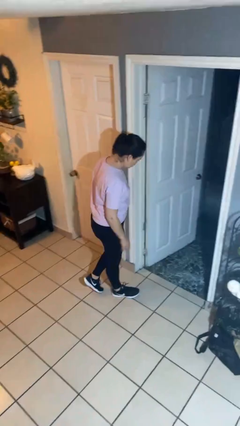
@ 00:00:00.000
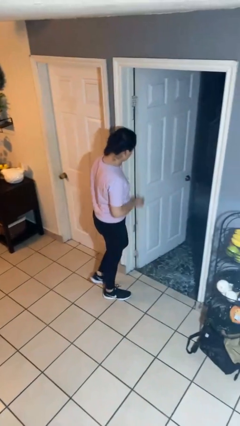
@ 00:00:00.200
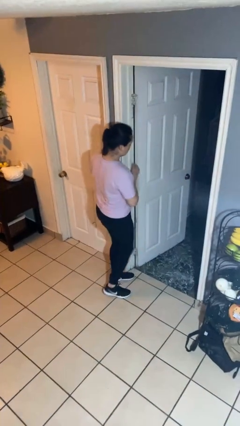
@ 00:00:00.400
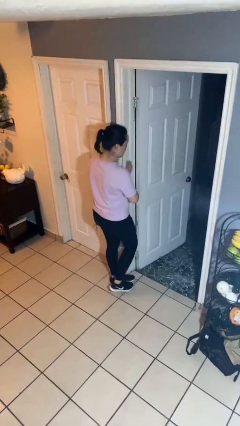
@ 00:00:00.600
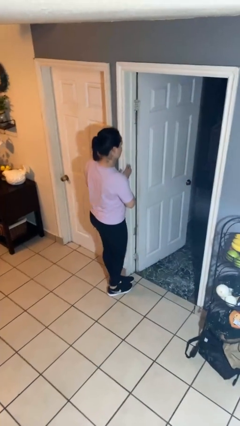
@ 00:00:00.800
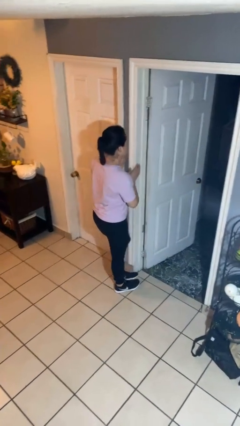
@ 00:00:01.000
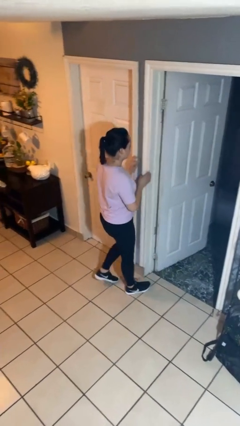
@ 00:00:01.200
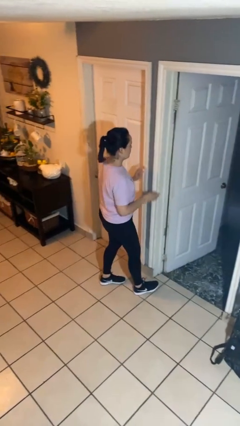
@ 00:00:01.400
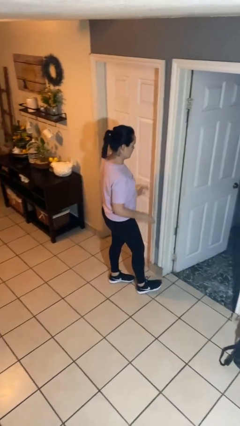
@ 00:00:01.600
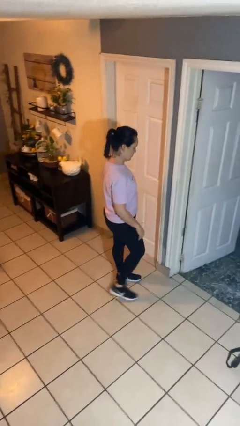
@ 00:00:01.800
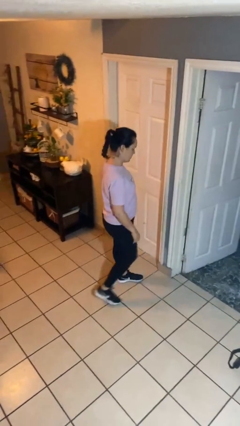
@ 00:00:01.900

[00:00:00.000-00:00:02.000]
person bumps into wall

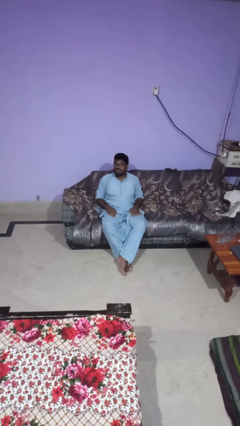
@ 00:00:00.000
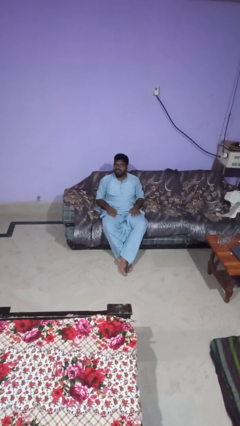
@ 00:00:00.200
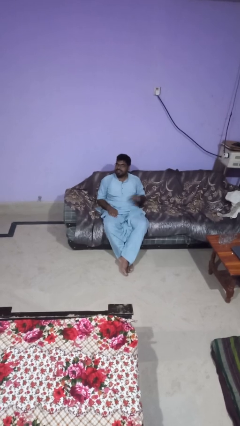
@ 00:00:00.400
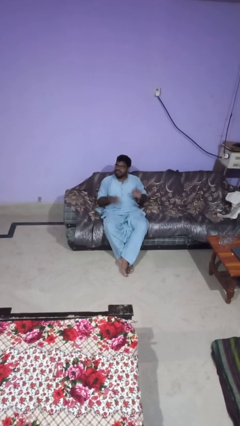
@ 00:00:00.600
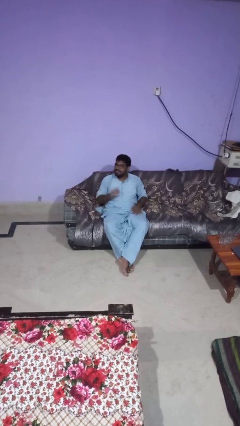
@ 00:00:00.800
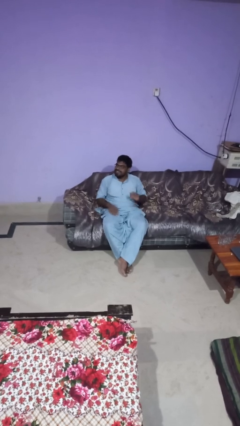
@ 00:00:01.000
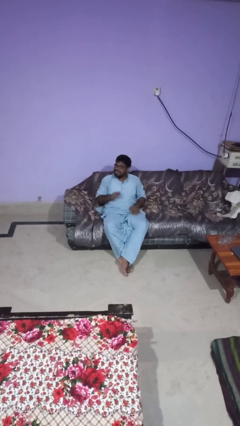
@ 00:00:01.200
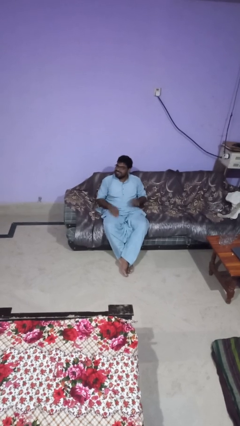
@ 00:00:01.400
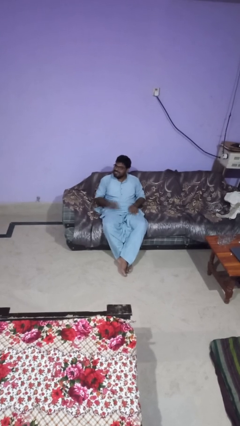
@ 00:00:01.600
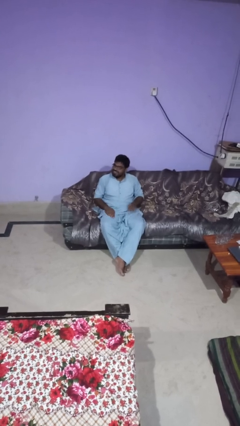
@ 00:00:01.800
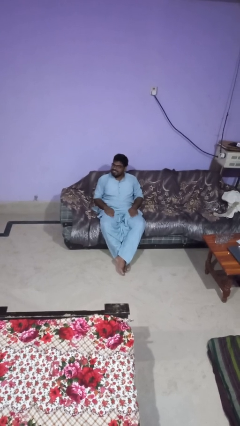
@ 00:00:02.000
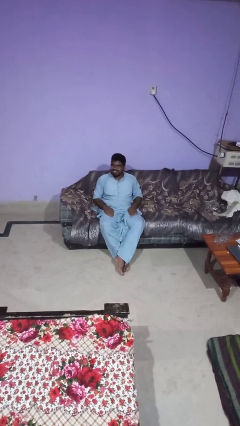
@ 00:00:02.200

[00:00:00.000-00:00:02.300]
person slaps hands on thighs

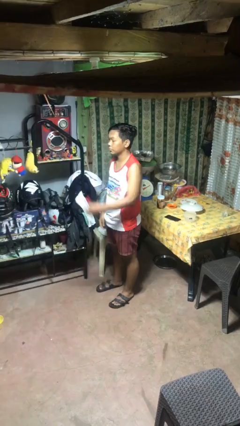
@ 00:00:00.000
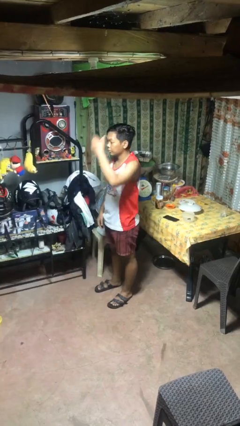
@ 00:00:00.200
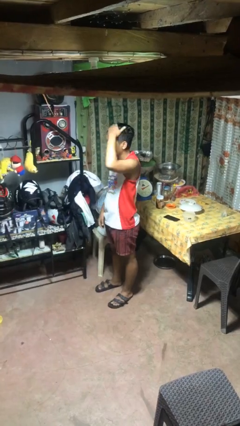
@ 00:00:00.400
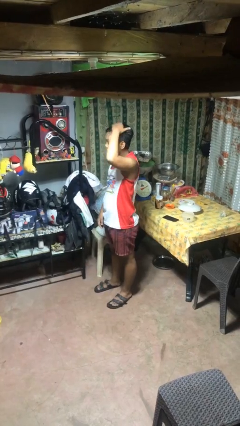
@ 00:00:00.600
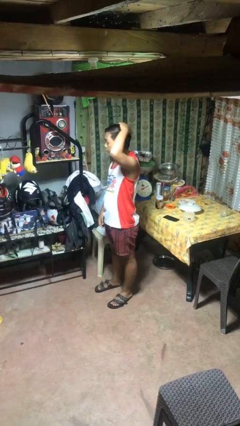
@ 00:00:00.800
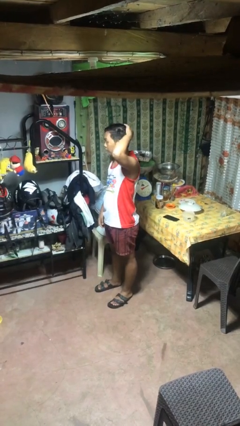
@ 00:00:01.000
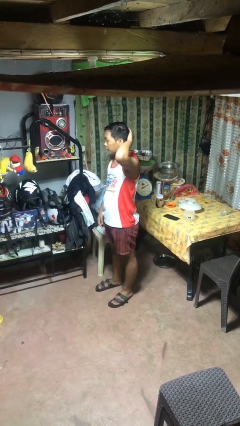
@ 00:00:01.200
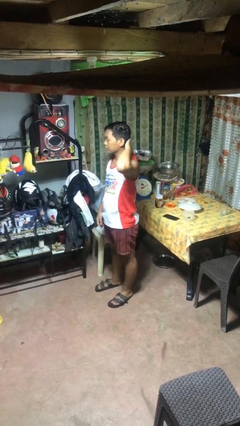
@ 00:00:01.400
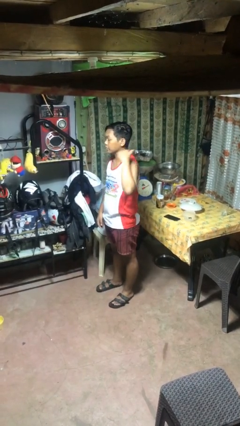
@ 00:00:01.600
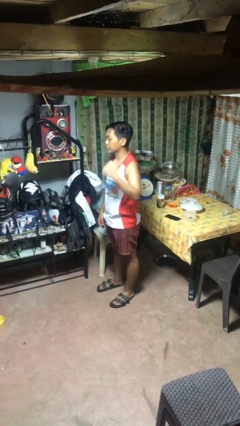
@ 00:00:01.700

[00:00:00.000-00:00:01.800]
person pats head

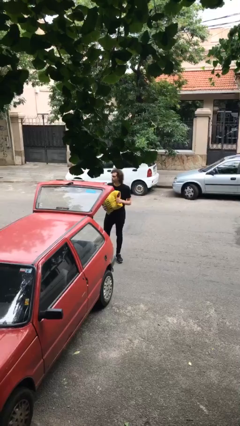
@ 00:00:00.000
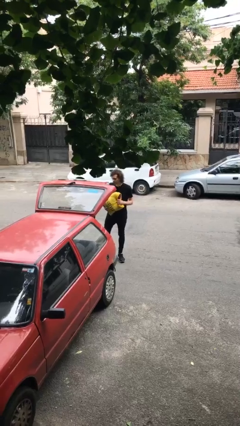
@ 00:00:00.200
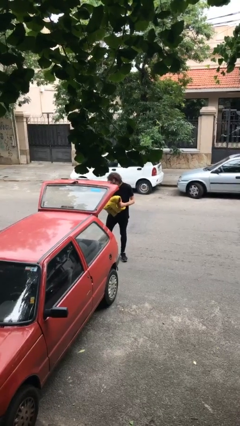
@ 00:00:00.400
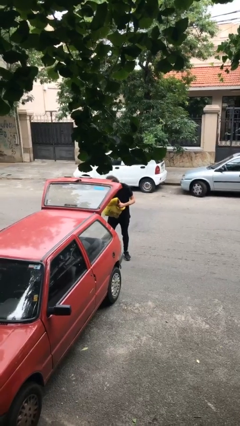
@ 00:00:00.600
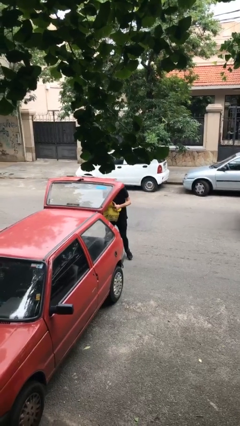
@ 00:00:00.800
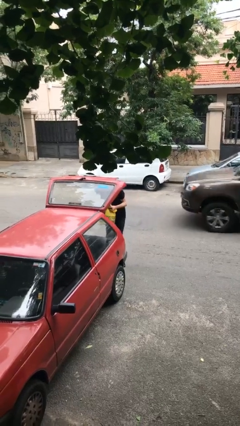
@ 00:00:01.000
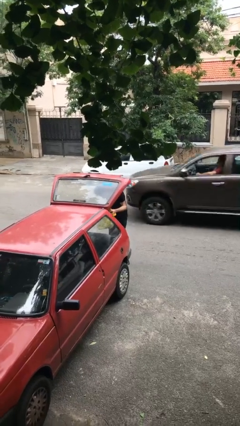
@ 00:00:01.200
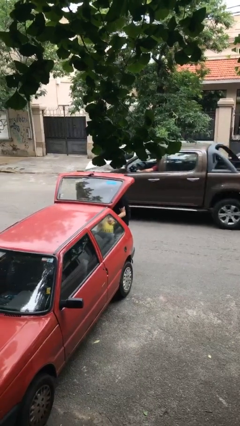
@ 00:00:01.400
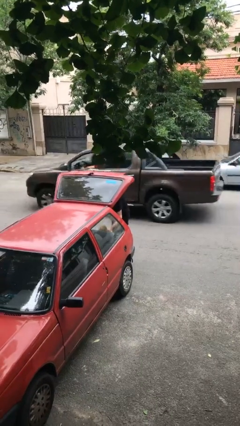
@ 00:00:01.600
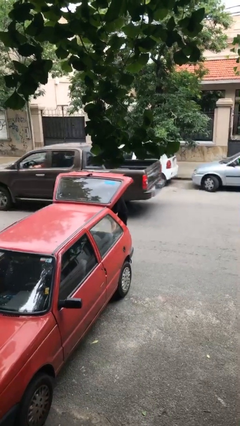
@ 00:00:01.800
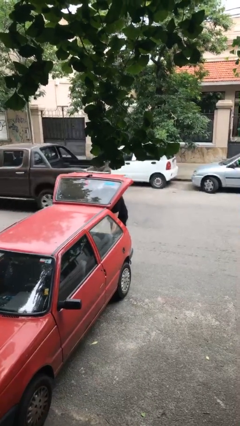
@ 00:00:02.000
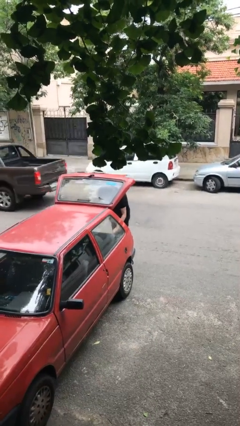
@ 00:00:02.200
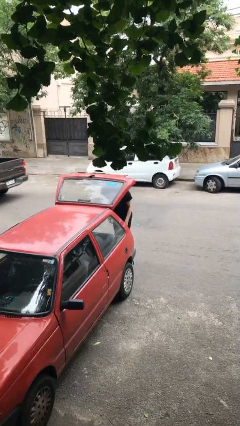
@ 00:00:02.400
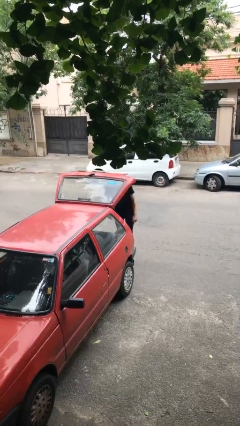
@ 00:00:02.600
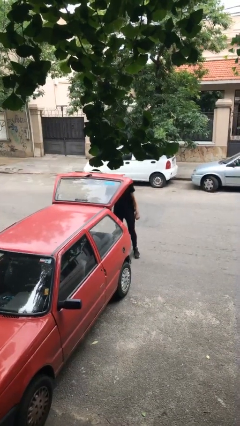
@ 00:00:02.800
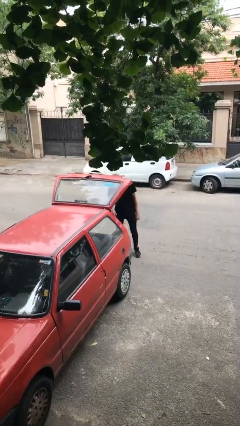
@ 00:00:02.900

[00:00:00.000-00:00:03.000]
person loads car

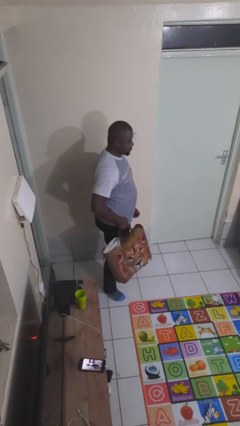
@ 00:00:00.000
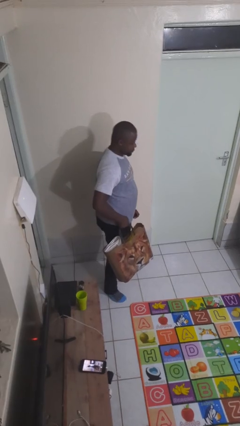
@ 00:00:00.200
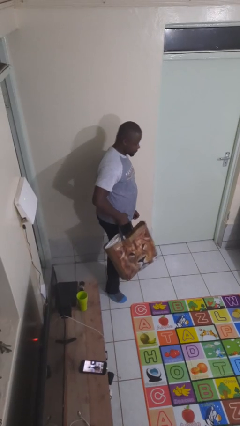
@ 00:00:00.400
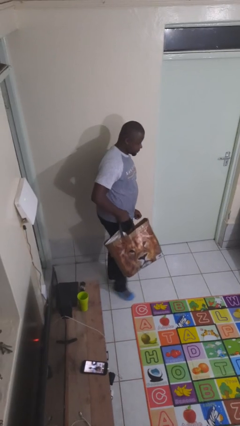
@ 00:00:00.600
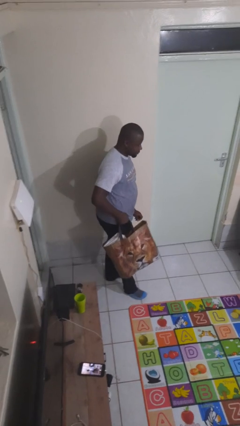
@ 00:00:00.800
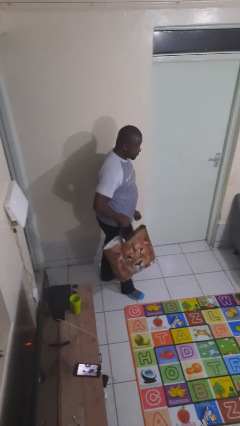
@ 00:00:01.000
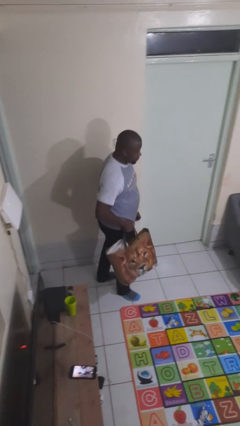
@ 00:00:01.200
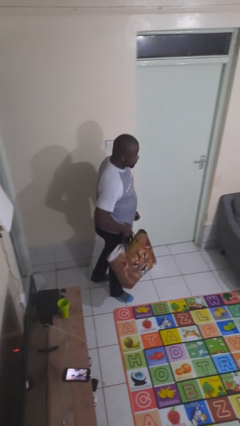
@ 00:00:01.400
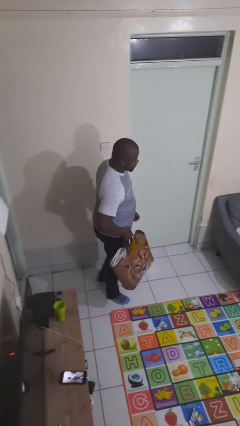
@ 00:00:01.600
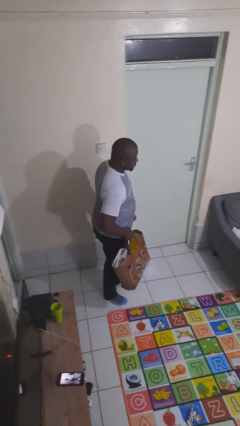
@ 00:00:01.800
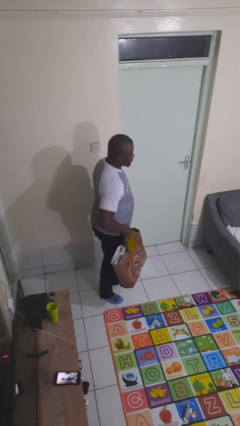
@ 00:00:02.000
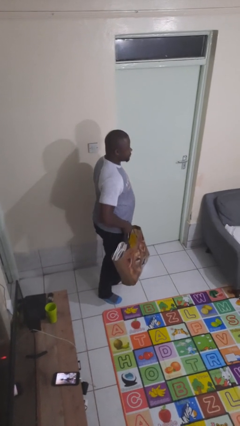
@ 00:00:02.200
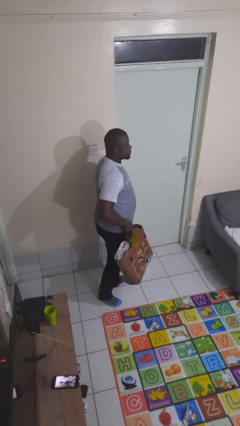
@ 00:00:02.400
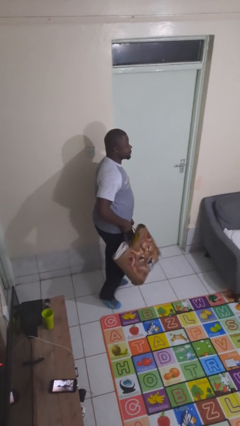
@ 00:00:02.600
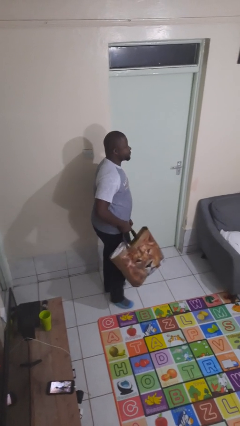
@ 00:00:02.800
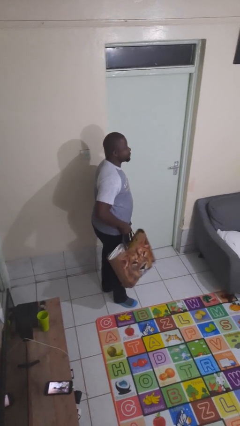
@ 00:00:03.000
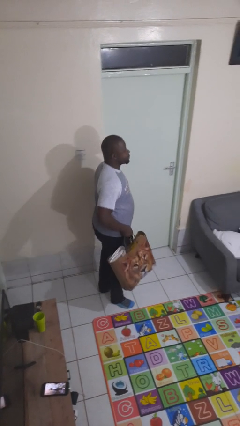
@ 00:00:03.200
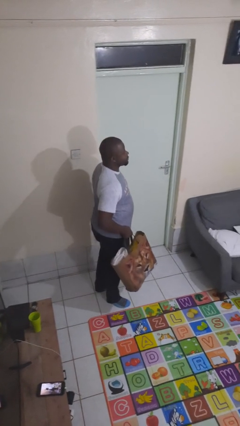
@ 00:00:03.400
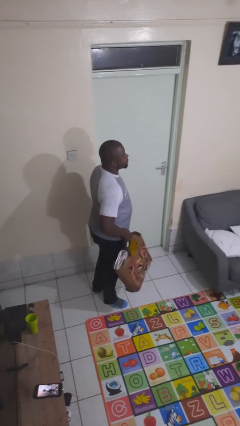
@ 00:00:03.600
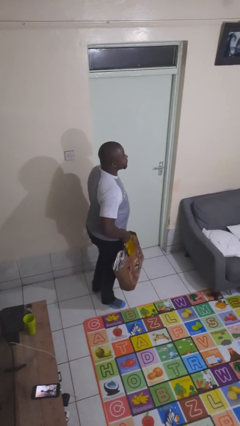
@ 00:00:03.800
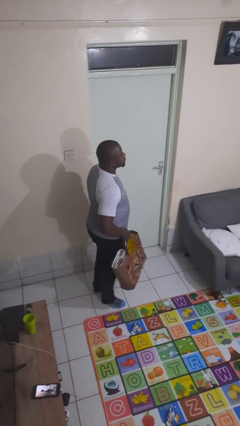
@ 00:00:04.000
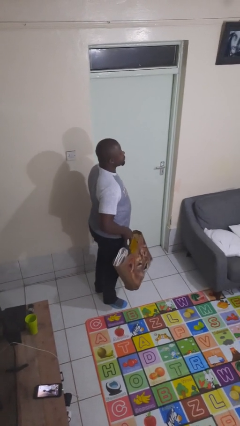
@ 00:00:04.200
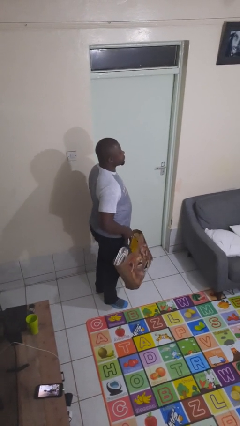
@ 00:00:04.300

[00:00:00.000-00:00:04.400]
person carries groceries

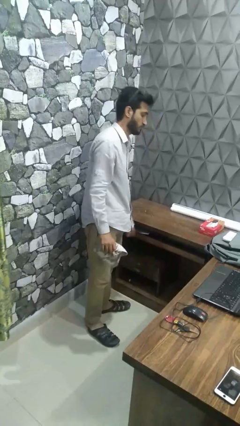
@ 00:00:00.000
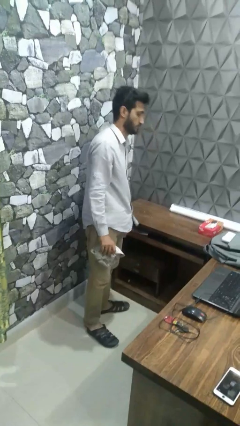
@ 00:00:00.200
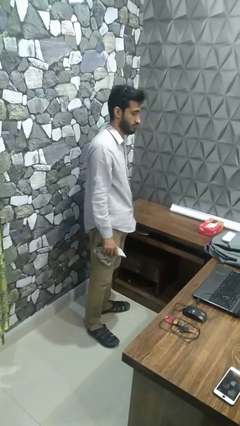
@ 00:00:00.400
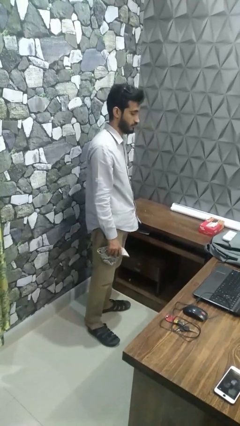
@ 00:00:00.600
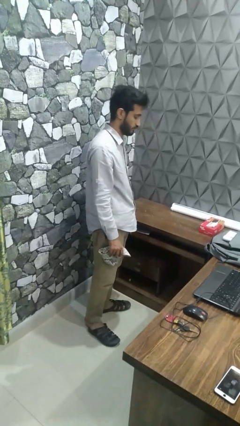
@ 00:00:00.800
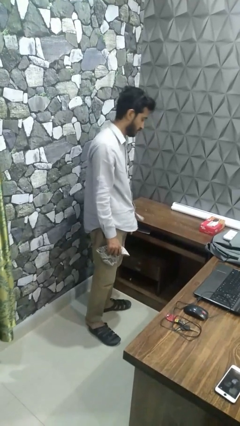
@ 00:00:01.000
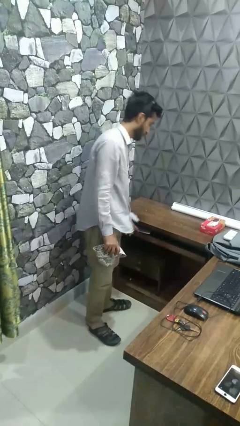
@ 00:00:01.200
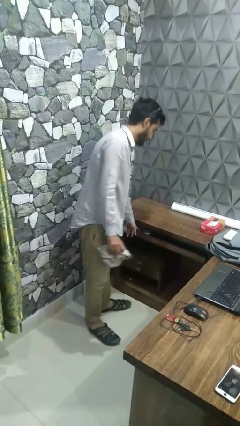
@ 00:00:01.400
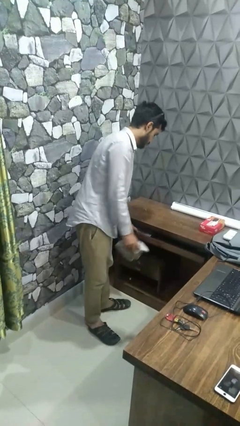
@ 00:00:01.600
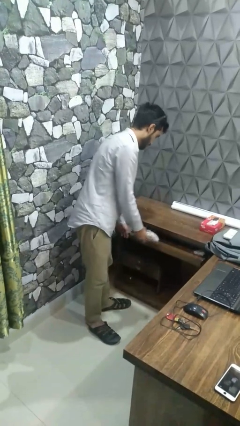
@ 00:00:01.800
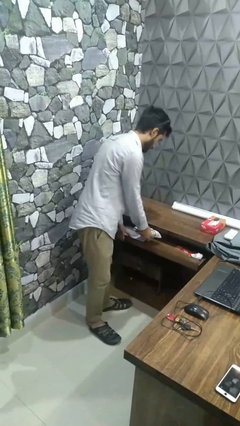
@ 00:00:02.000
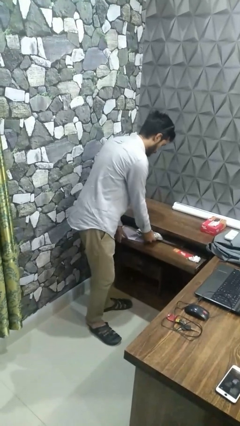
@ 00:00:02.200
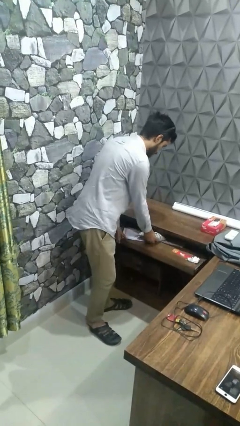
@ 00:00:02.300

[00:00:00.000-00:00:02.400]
person puts clothes into dresser

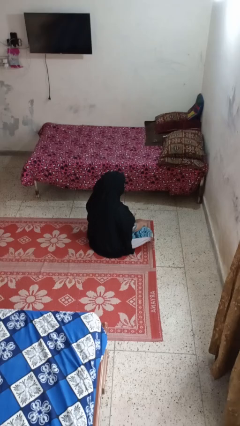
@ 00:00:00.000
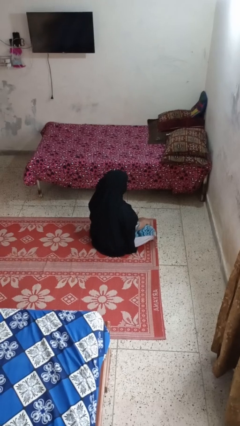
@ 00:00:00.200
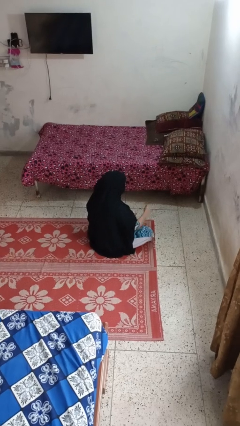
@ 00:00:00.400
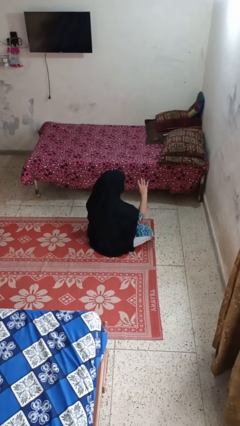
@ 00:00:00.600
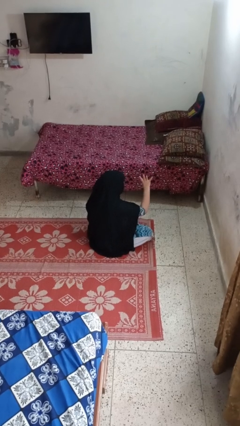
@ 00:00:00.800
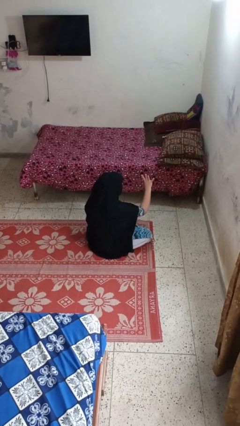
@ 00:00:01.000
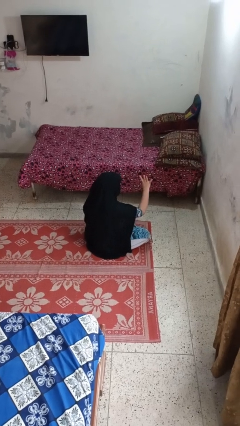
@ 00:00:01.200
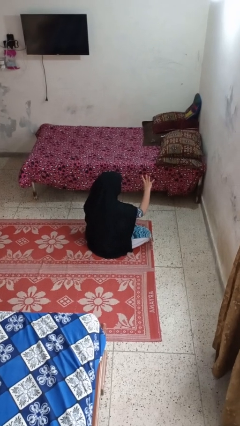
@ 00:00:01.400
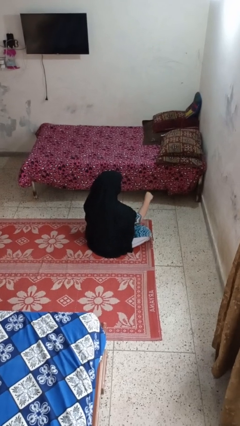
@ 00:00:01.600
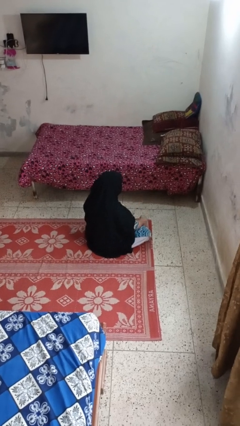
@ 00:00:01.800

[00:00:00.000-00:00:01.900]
person gestures number four
